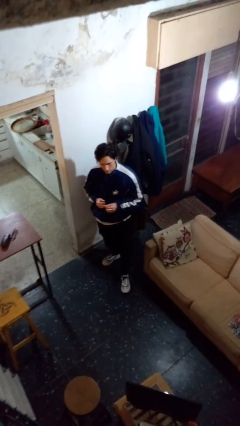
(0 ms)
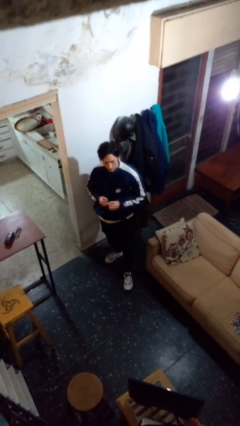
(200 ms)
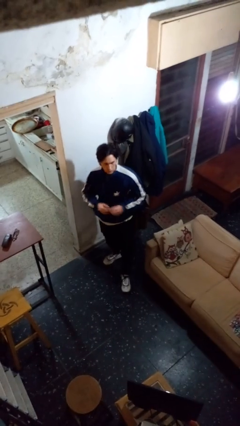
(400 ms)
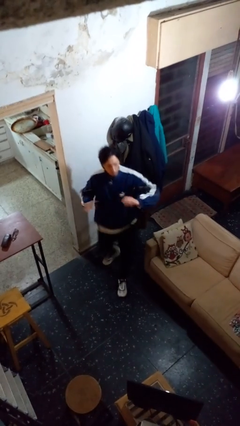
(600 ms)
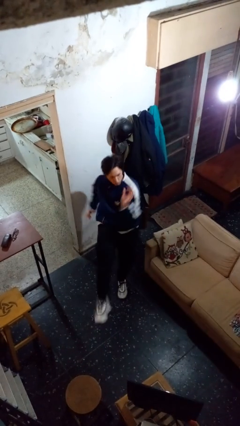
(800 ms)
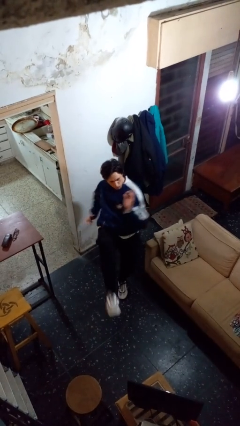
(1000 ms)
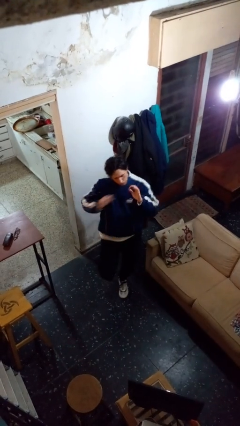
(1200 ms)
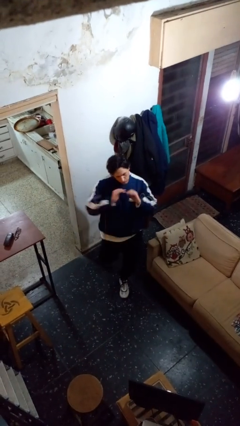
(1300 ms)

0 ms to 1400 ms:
person karate kicks

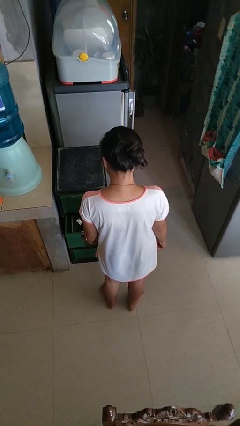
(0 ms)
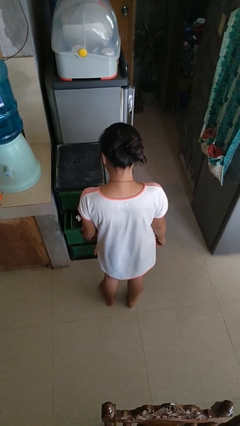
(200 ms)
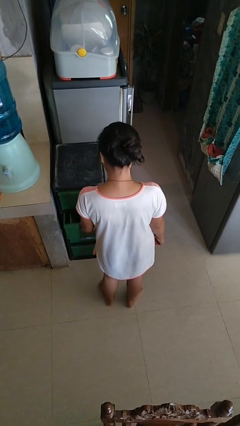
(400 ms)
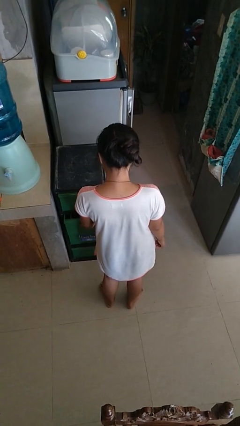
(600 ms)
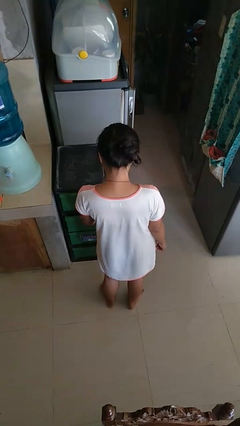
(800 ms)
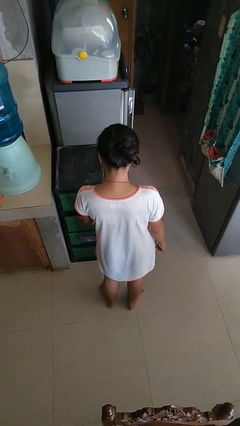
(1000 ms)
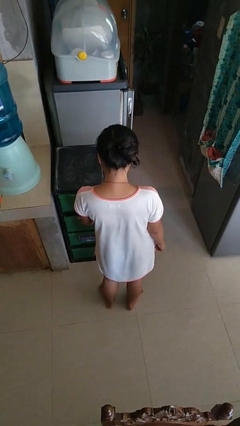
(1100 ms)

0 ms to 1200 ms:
person closes kitchen drawer

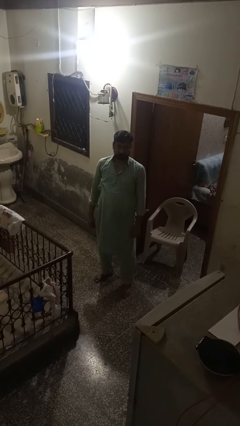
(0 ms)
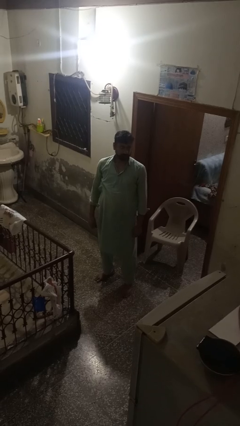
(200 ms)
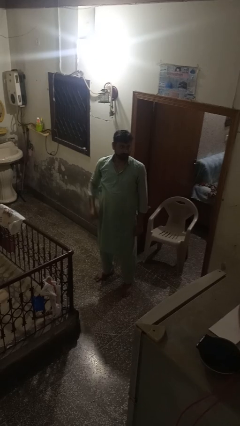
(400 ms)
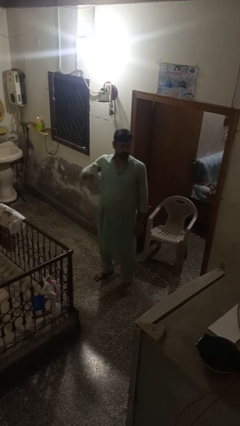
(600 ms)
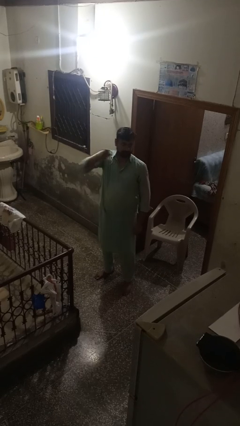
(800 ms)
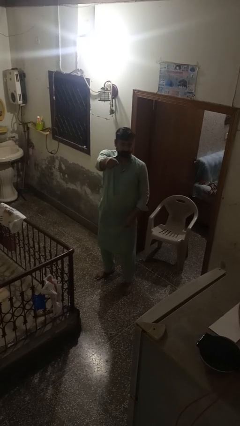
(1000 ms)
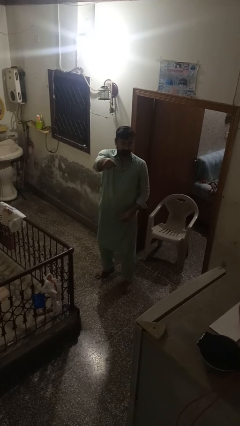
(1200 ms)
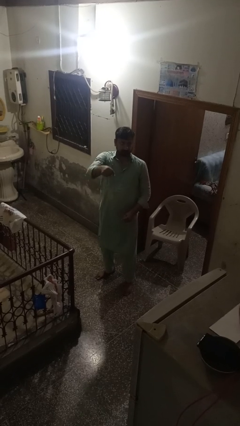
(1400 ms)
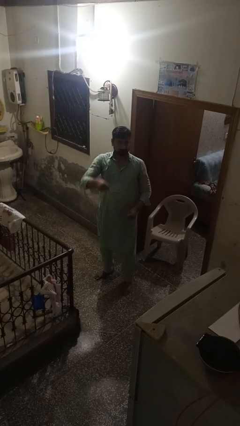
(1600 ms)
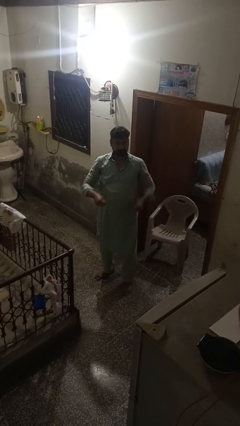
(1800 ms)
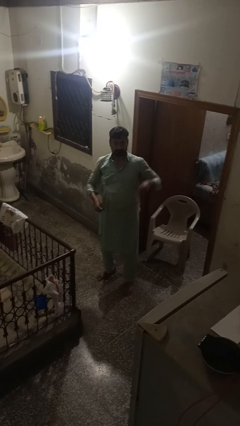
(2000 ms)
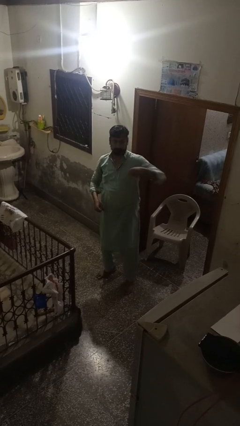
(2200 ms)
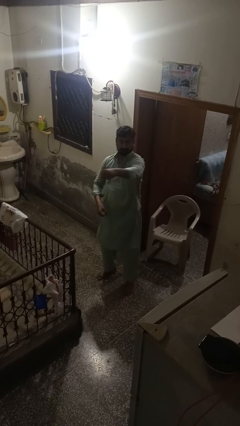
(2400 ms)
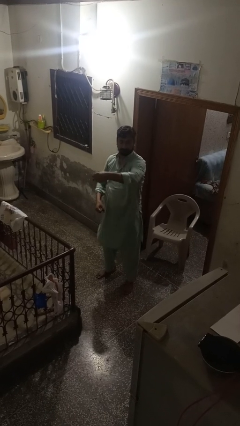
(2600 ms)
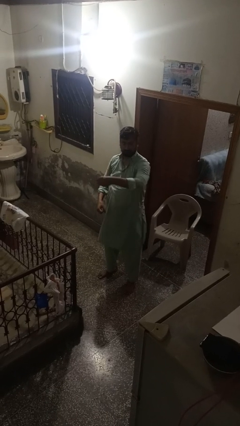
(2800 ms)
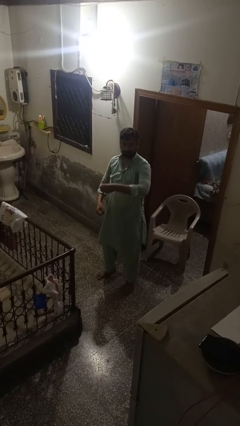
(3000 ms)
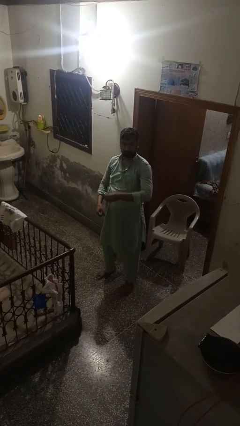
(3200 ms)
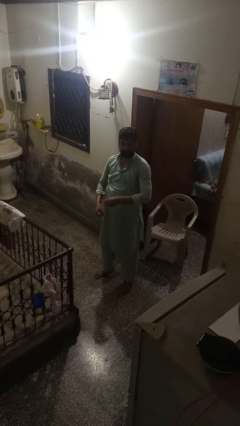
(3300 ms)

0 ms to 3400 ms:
person punches

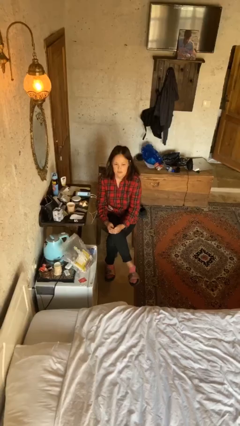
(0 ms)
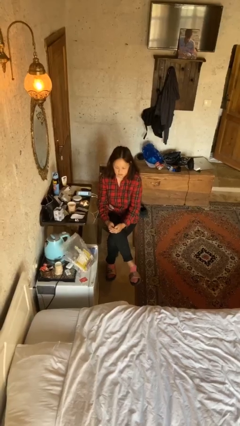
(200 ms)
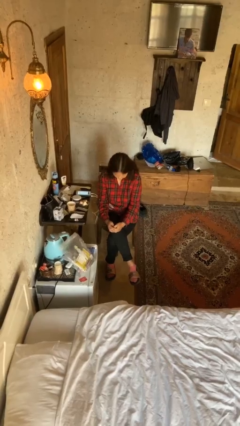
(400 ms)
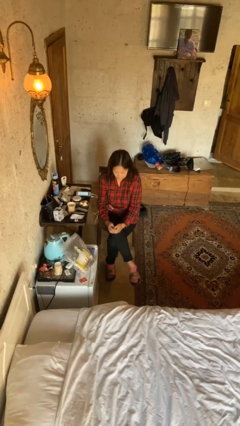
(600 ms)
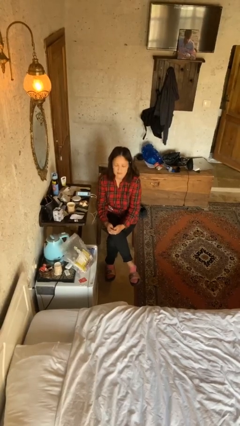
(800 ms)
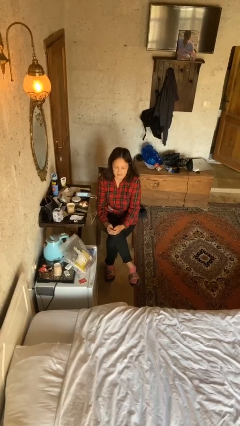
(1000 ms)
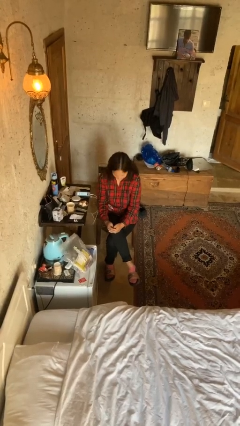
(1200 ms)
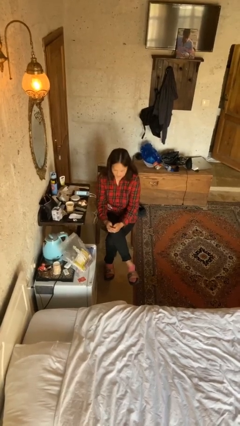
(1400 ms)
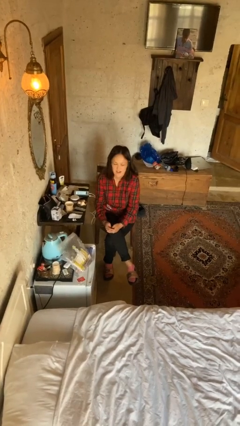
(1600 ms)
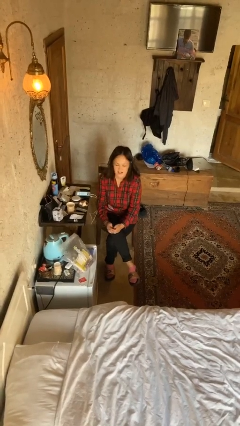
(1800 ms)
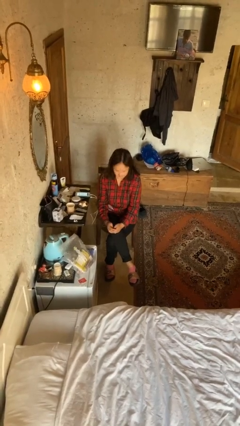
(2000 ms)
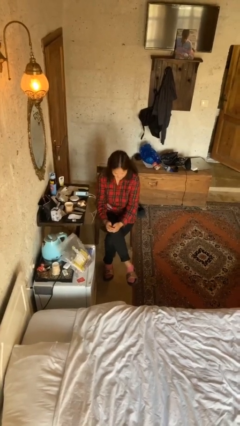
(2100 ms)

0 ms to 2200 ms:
person nods head

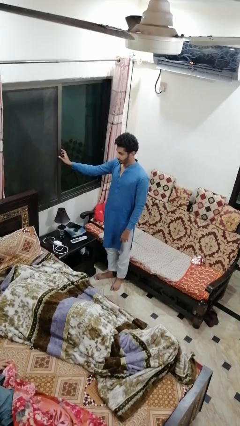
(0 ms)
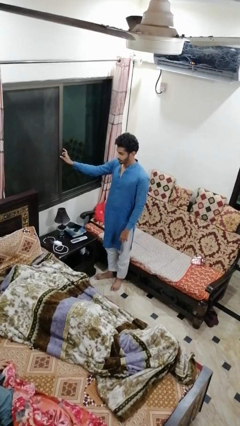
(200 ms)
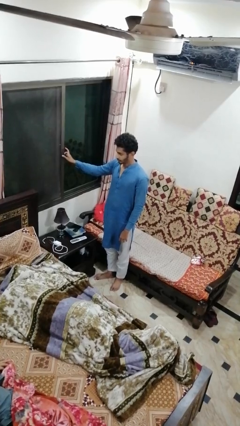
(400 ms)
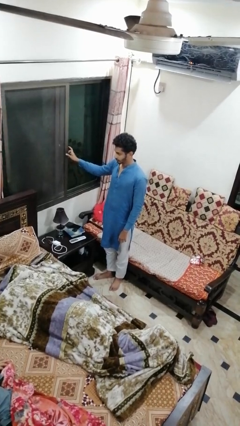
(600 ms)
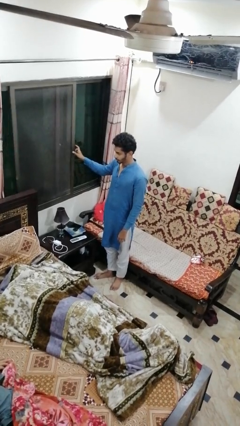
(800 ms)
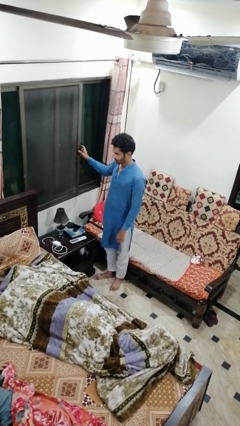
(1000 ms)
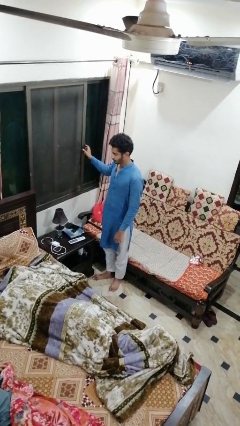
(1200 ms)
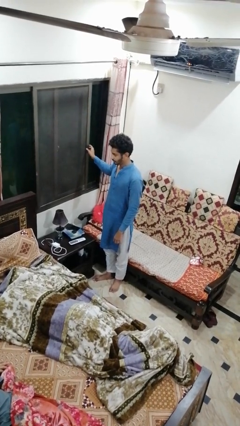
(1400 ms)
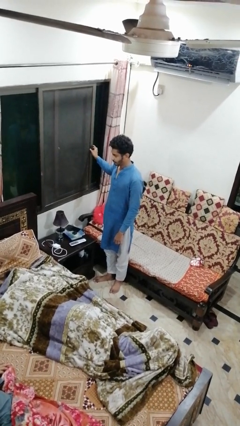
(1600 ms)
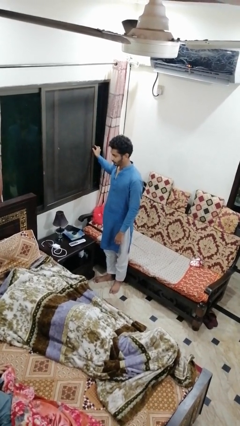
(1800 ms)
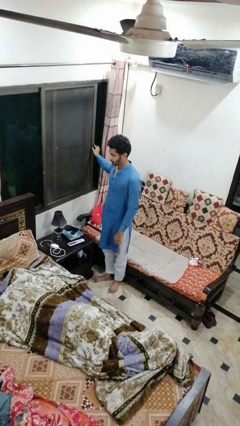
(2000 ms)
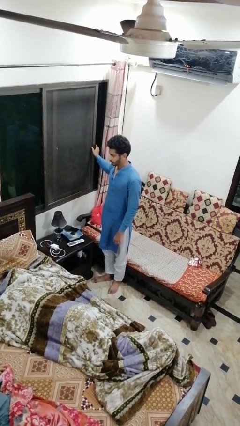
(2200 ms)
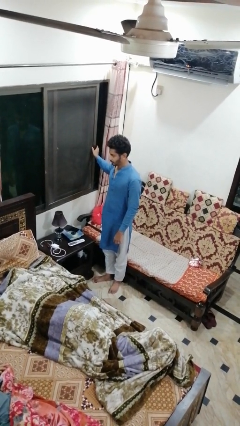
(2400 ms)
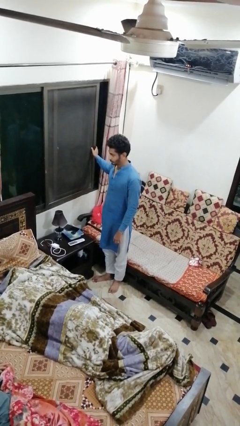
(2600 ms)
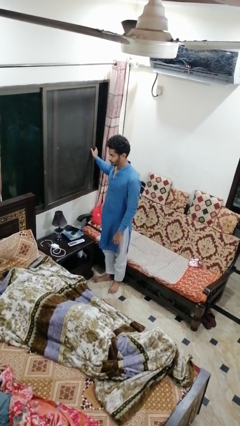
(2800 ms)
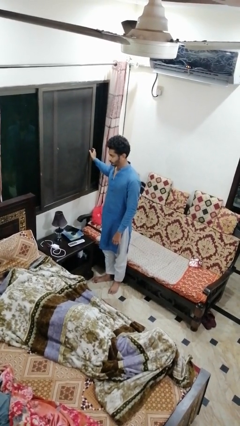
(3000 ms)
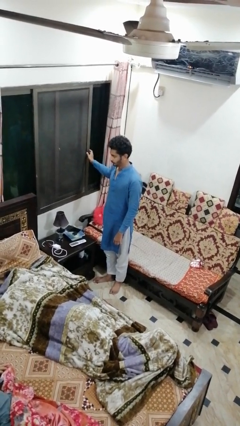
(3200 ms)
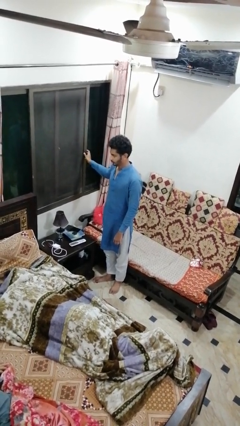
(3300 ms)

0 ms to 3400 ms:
person opens home window

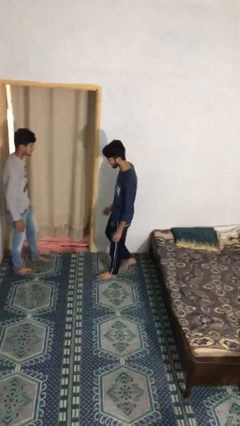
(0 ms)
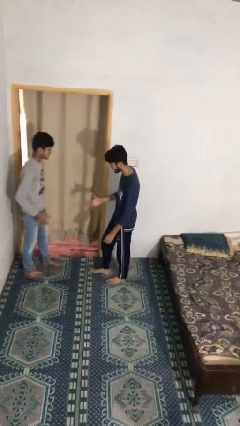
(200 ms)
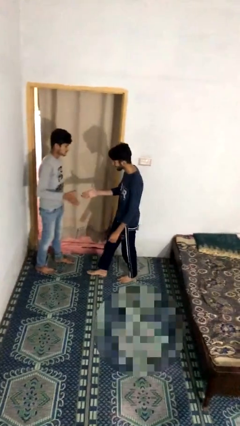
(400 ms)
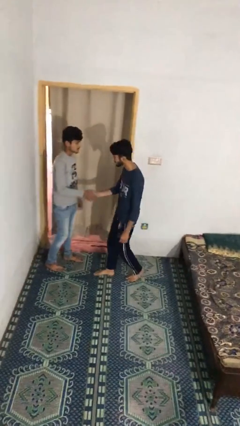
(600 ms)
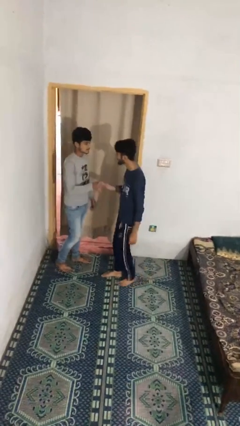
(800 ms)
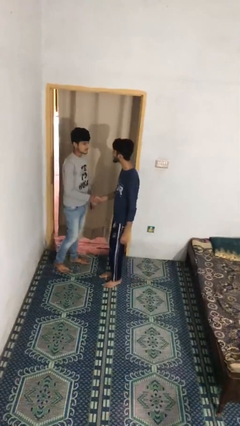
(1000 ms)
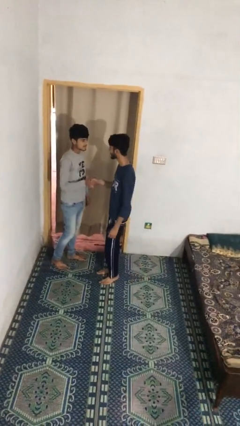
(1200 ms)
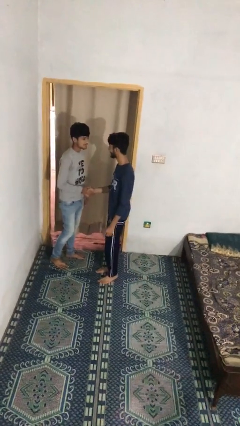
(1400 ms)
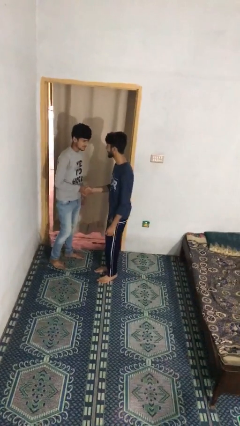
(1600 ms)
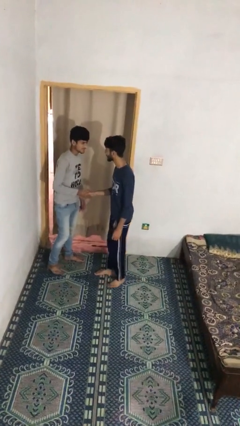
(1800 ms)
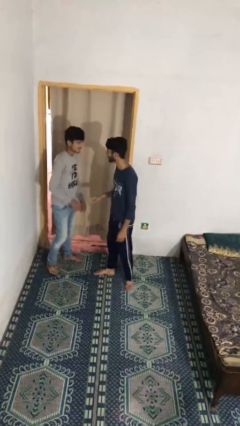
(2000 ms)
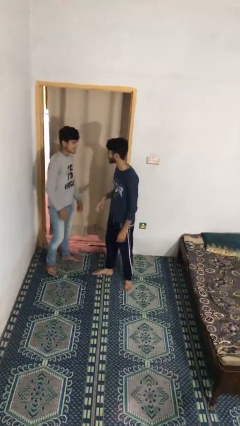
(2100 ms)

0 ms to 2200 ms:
person shakes hand

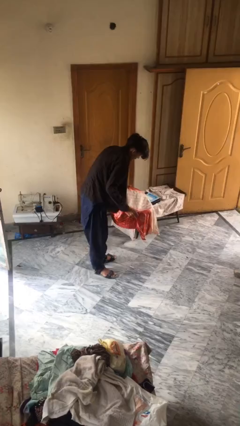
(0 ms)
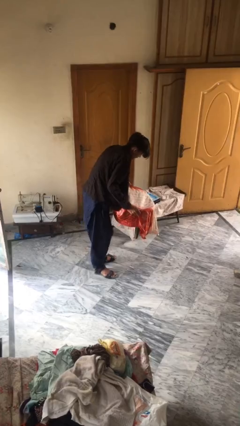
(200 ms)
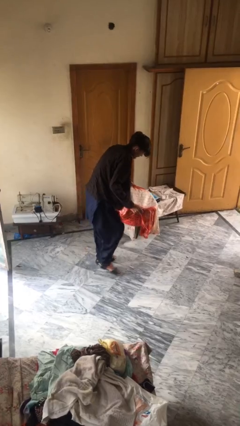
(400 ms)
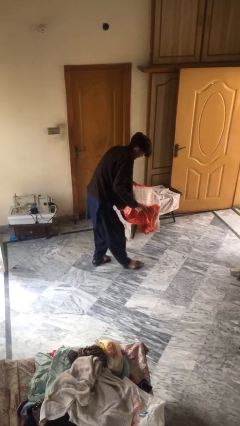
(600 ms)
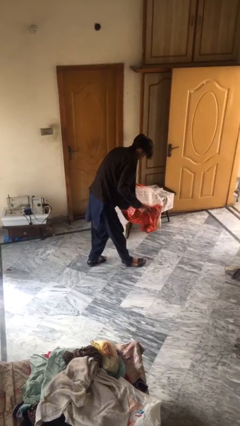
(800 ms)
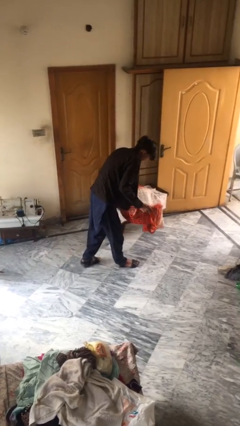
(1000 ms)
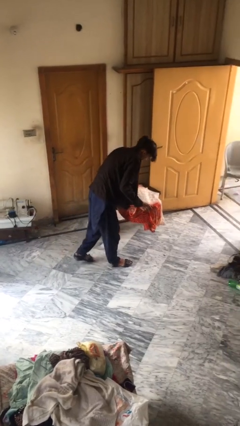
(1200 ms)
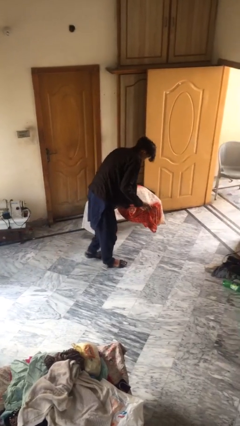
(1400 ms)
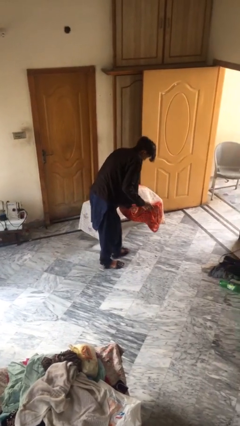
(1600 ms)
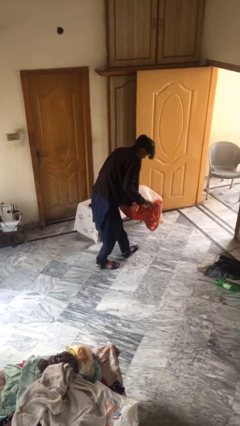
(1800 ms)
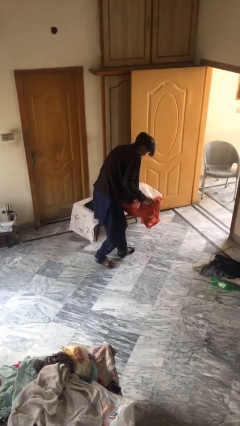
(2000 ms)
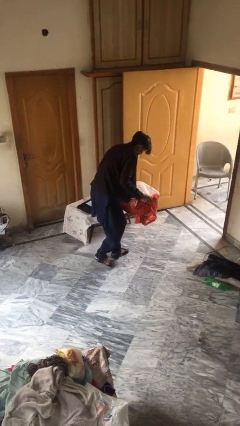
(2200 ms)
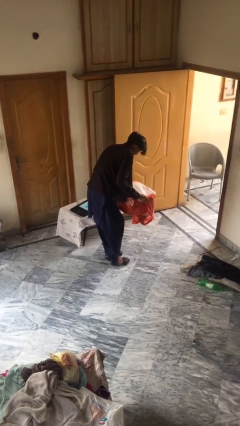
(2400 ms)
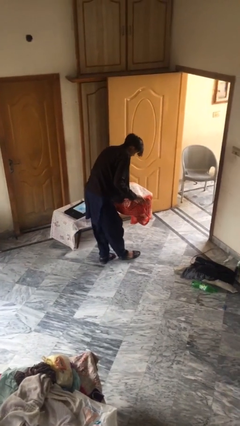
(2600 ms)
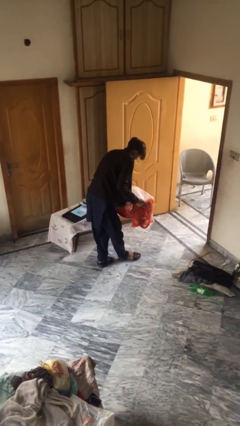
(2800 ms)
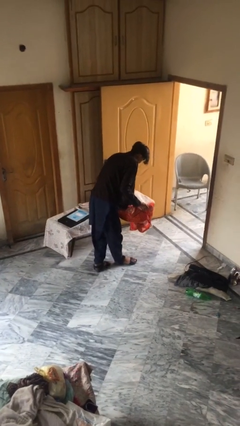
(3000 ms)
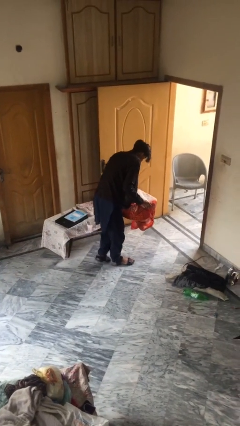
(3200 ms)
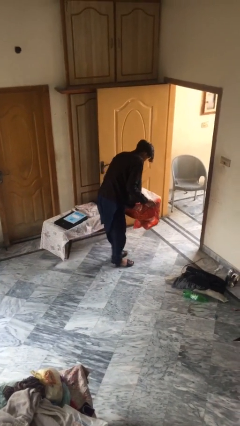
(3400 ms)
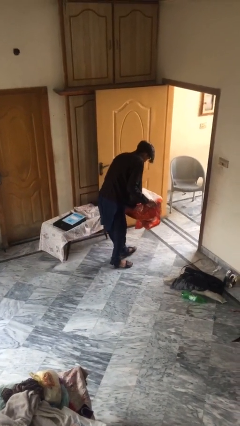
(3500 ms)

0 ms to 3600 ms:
person carries heavy object
